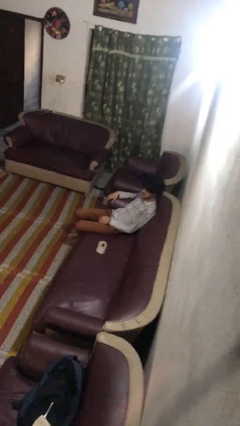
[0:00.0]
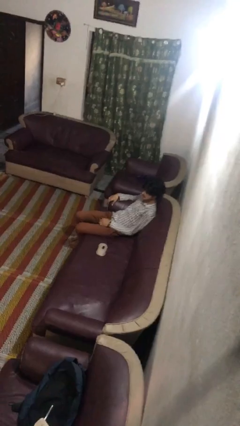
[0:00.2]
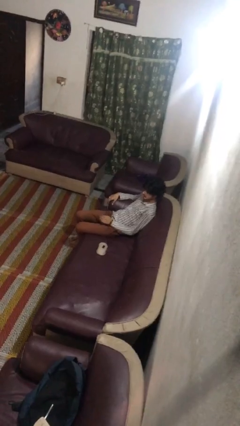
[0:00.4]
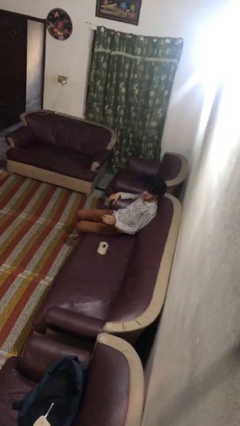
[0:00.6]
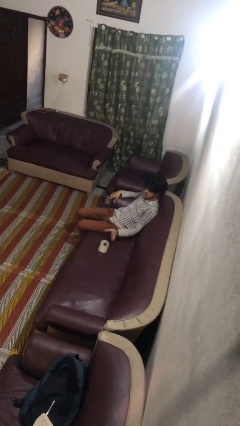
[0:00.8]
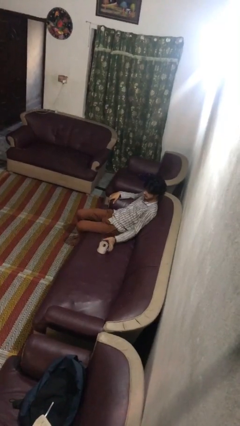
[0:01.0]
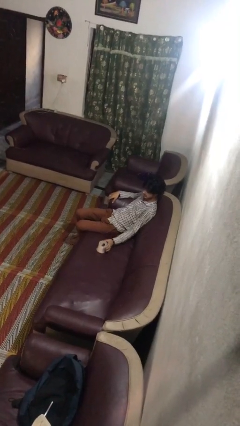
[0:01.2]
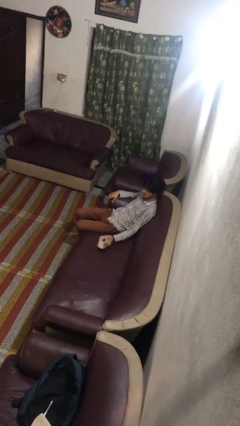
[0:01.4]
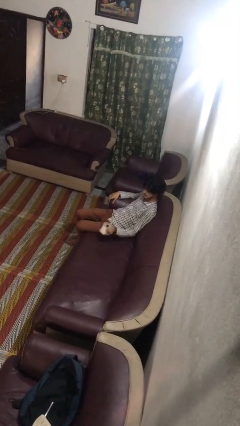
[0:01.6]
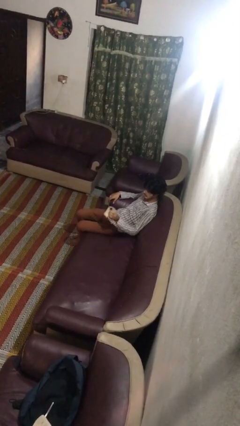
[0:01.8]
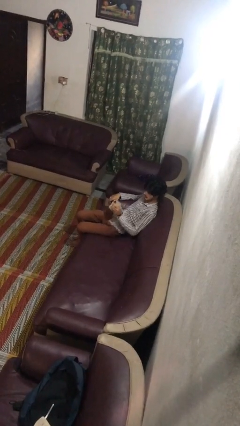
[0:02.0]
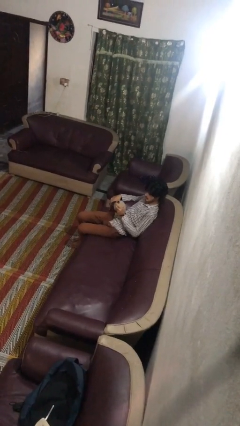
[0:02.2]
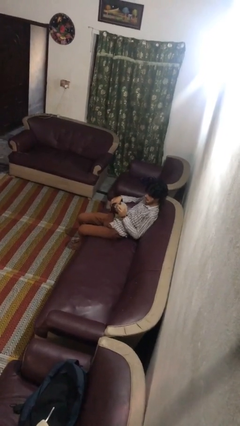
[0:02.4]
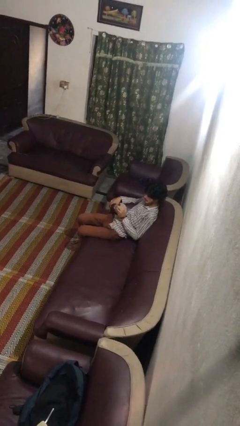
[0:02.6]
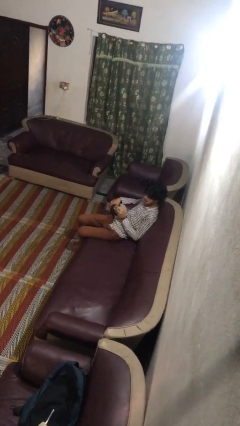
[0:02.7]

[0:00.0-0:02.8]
person picks up object from couch

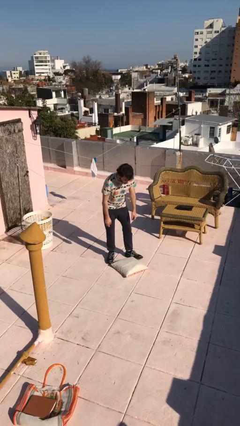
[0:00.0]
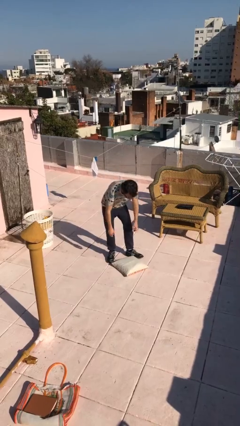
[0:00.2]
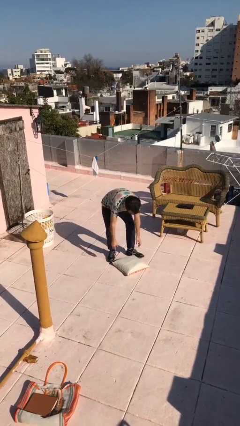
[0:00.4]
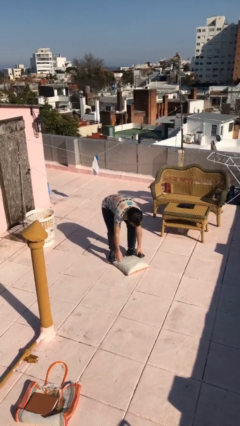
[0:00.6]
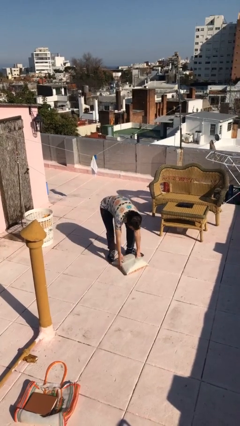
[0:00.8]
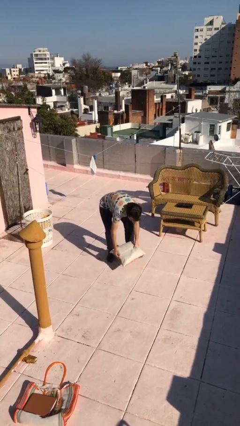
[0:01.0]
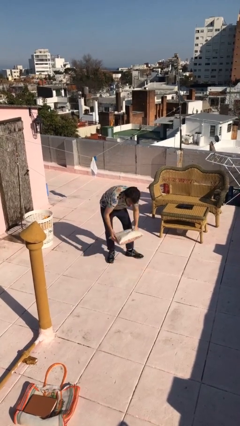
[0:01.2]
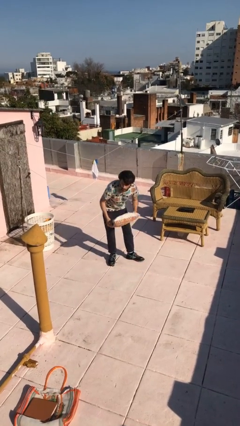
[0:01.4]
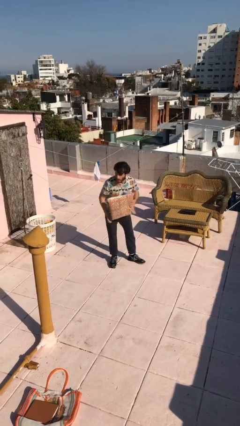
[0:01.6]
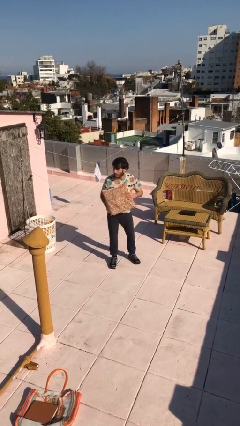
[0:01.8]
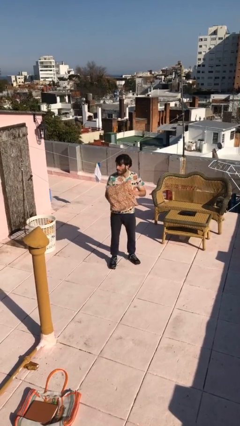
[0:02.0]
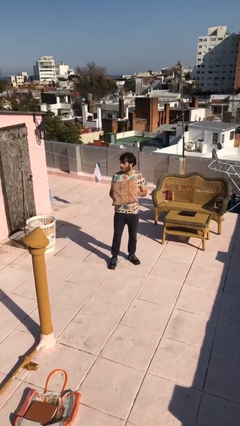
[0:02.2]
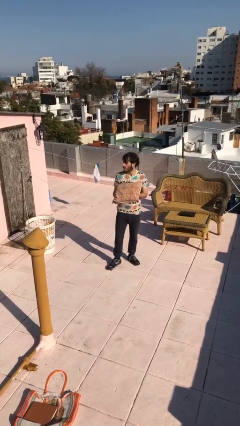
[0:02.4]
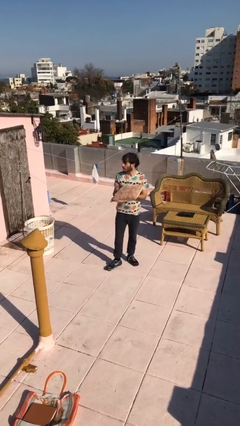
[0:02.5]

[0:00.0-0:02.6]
person picks up object from floor

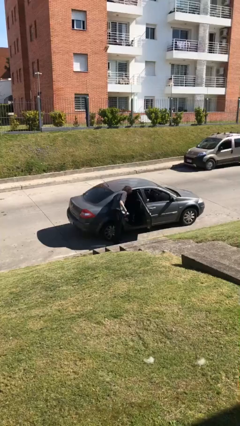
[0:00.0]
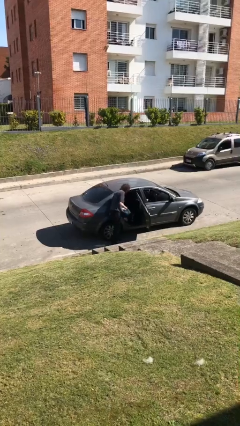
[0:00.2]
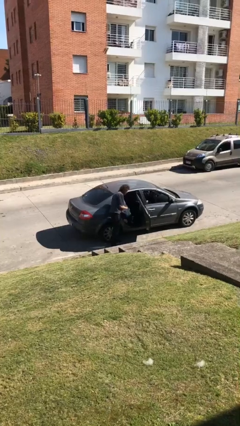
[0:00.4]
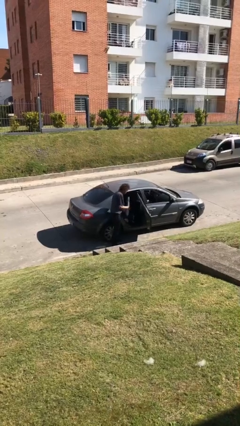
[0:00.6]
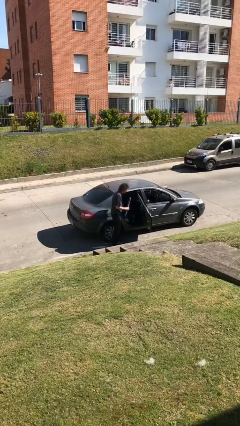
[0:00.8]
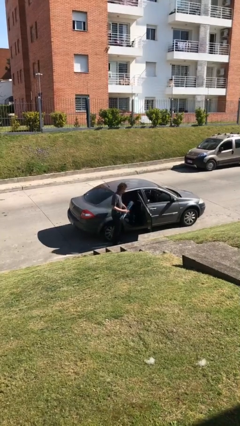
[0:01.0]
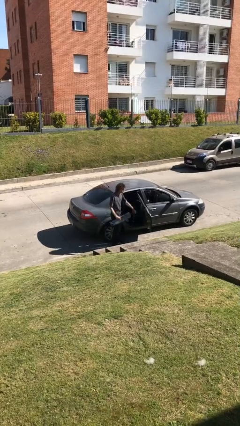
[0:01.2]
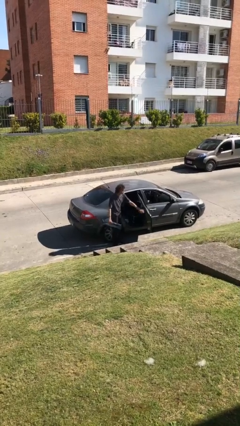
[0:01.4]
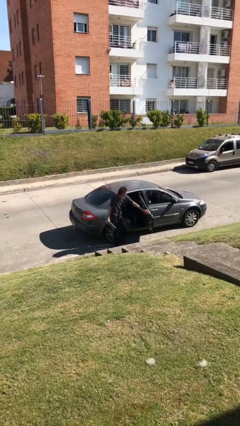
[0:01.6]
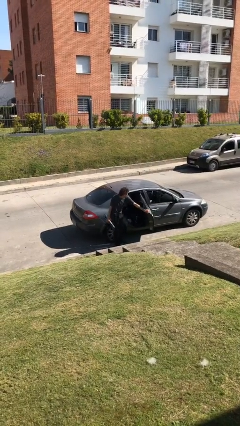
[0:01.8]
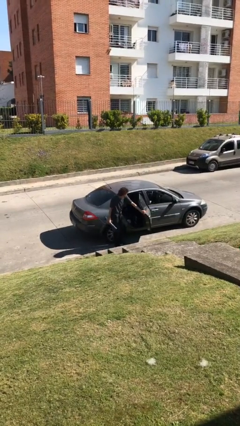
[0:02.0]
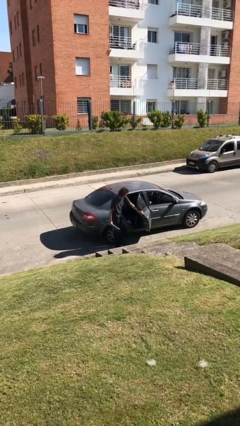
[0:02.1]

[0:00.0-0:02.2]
person unloads car

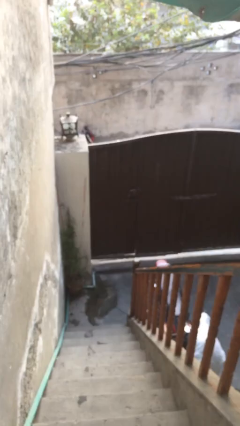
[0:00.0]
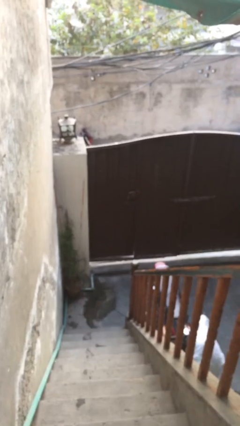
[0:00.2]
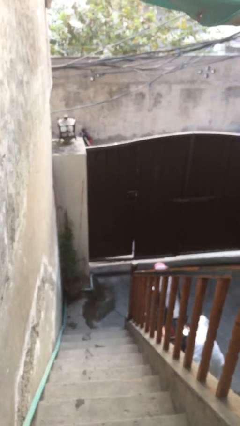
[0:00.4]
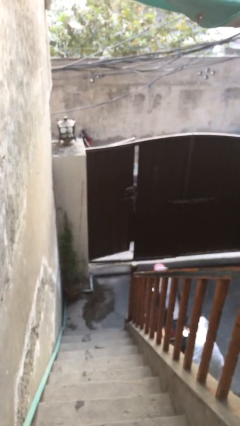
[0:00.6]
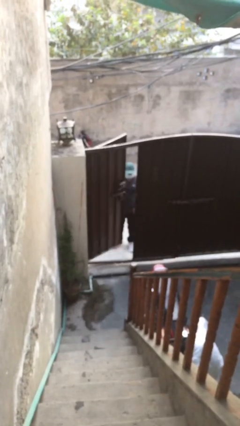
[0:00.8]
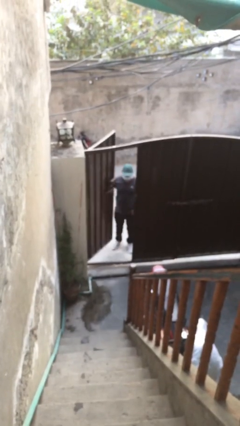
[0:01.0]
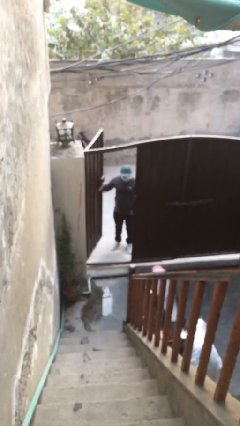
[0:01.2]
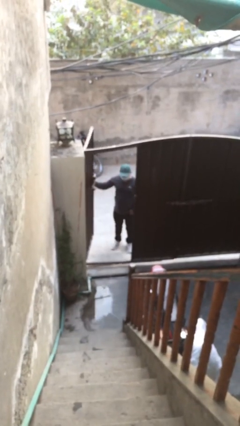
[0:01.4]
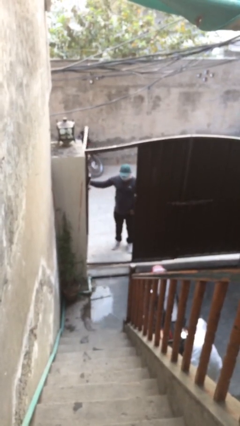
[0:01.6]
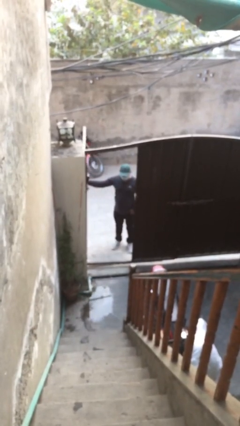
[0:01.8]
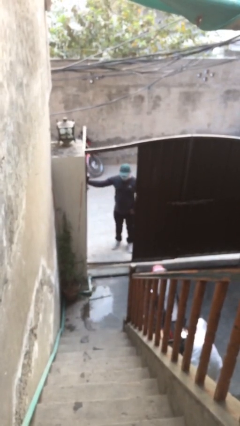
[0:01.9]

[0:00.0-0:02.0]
person opens facility door

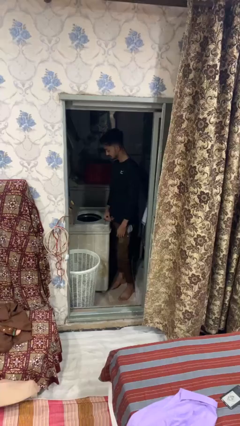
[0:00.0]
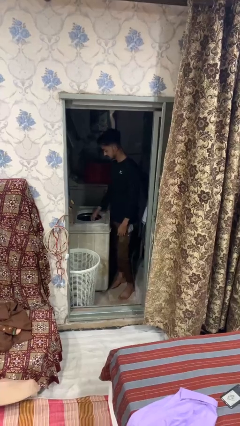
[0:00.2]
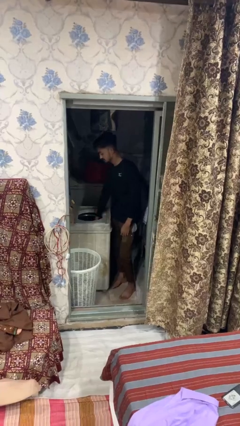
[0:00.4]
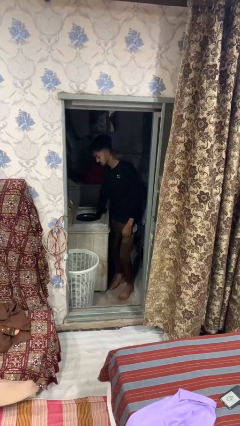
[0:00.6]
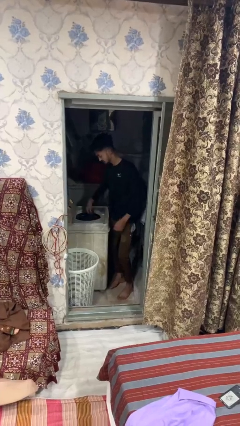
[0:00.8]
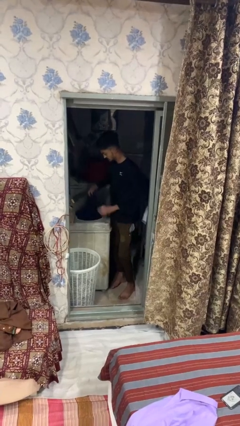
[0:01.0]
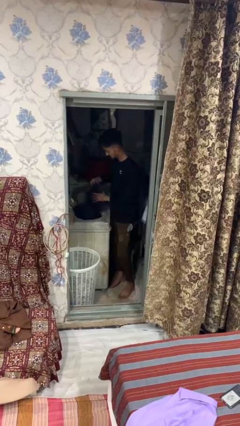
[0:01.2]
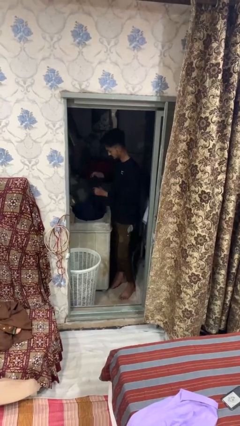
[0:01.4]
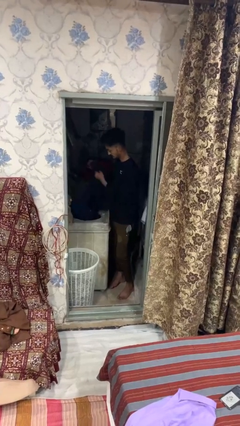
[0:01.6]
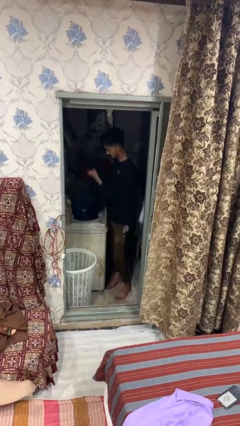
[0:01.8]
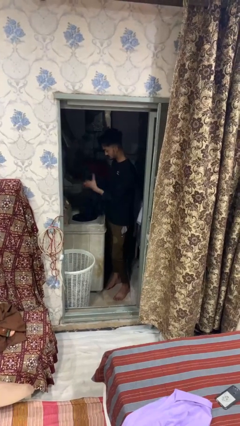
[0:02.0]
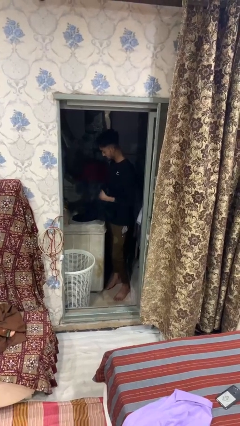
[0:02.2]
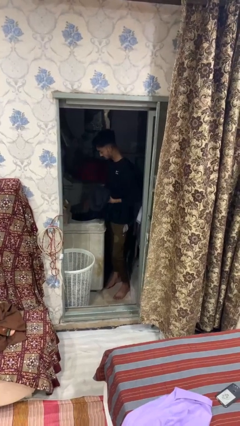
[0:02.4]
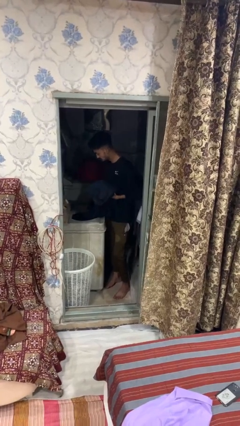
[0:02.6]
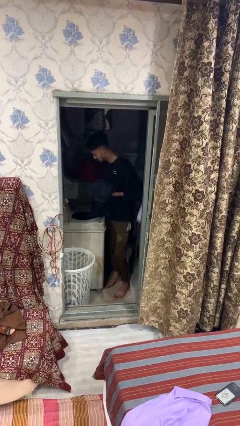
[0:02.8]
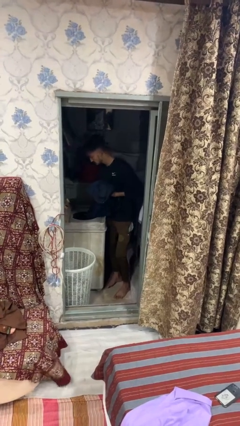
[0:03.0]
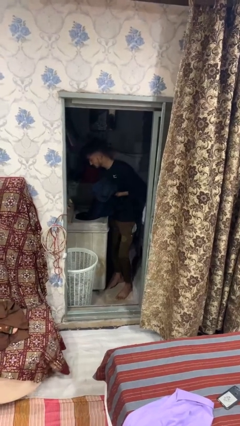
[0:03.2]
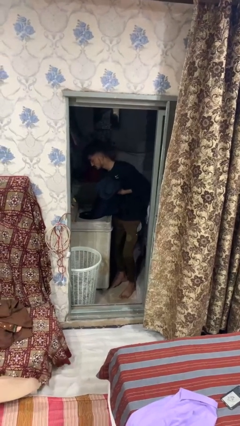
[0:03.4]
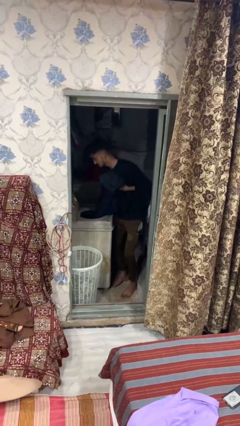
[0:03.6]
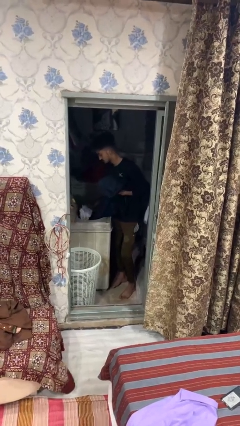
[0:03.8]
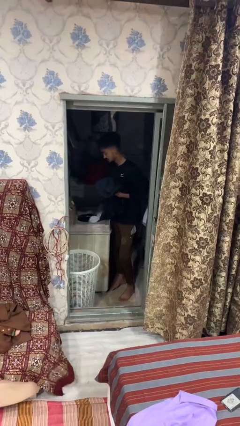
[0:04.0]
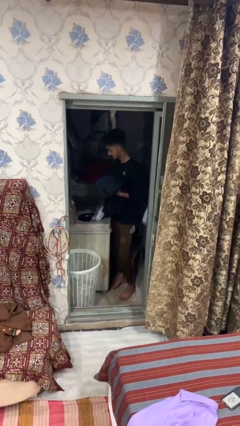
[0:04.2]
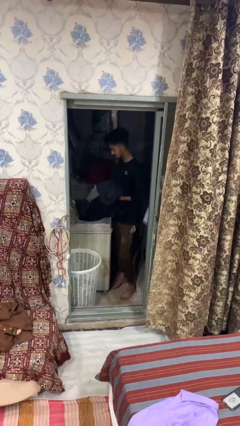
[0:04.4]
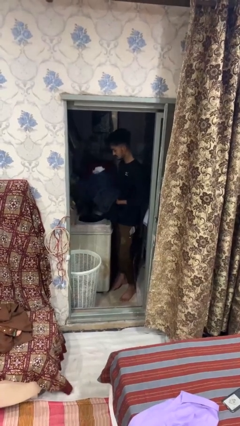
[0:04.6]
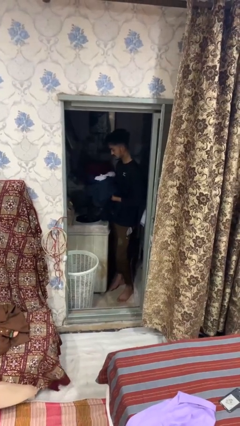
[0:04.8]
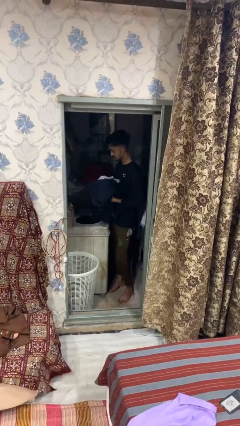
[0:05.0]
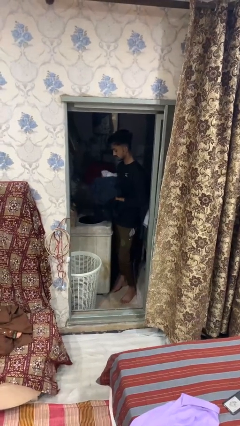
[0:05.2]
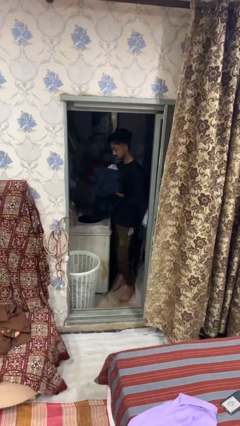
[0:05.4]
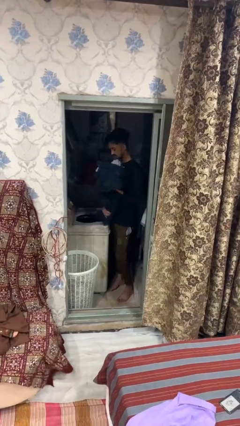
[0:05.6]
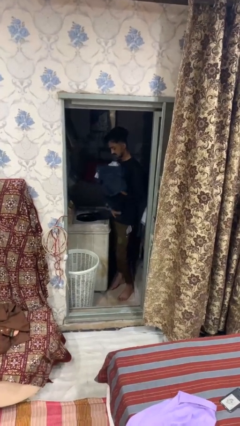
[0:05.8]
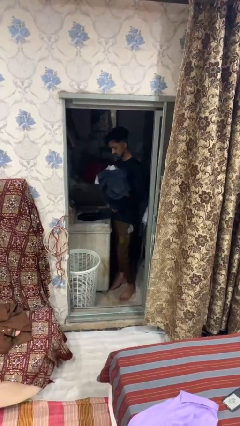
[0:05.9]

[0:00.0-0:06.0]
person unloads clotheswasher

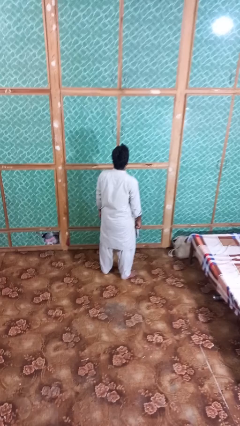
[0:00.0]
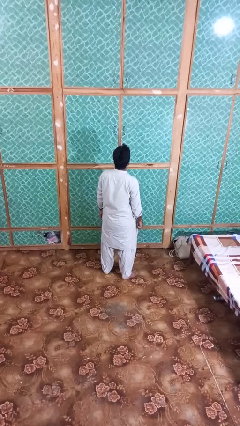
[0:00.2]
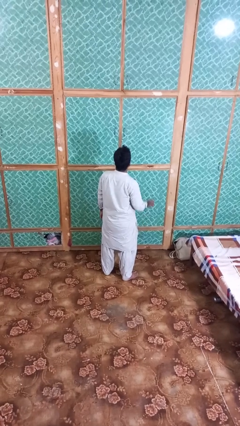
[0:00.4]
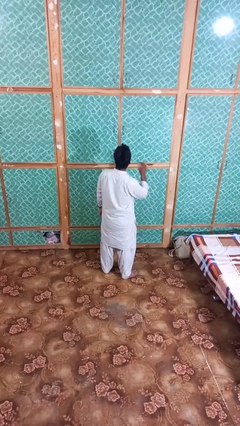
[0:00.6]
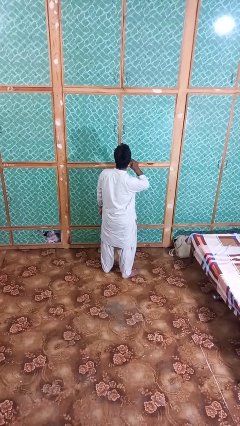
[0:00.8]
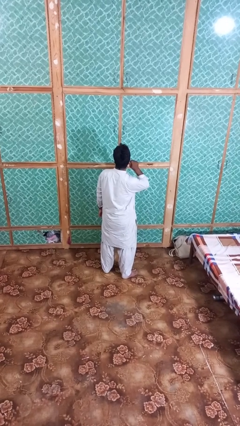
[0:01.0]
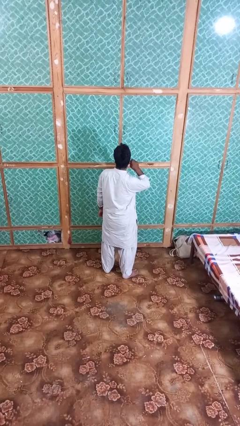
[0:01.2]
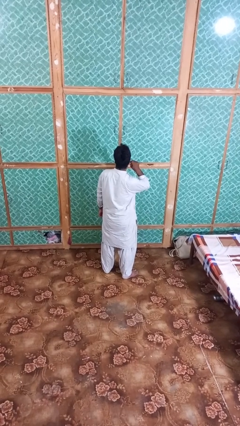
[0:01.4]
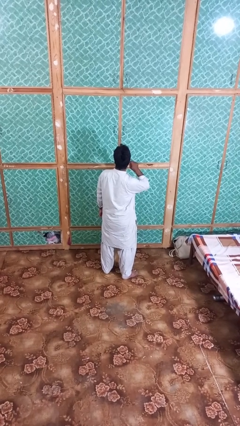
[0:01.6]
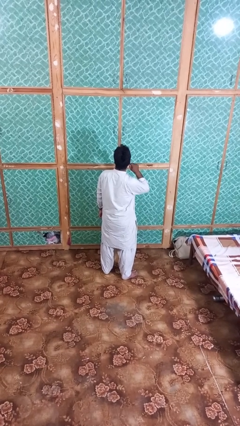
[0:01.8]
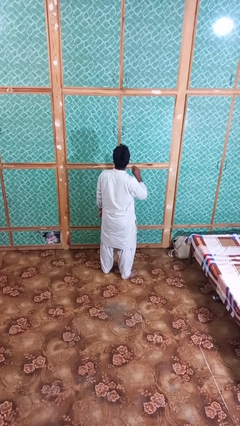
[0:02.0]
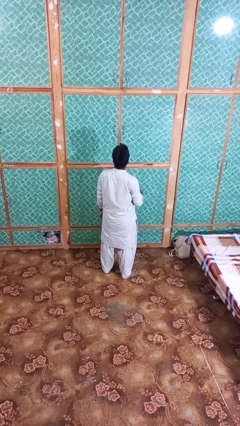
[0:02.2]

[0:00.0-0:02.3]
person touches earlobe

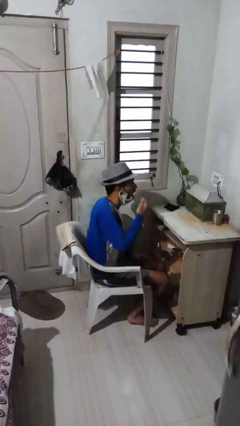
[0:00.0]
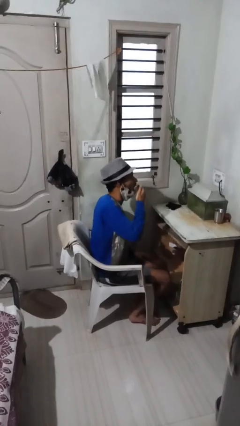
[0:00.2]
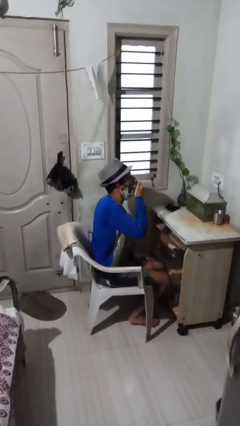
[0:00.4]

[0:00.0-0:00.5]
person yawns
